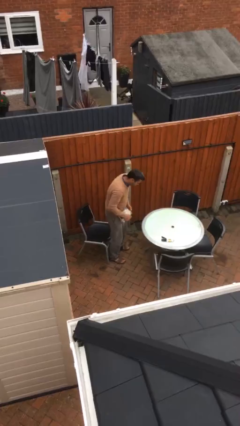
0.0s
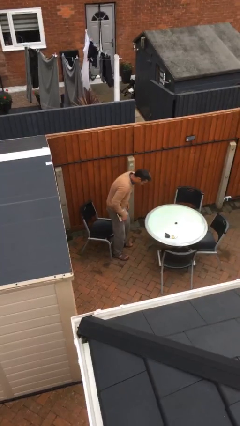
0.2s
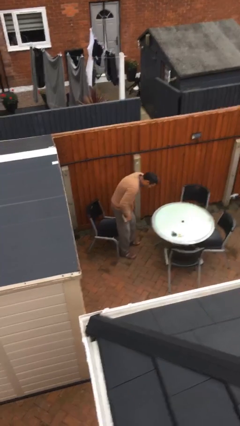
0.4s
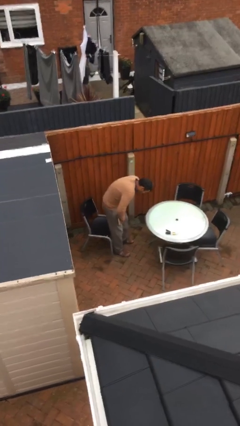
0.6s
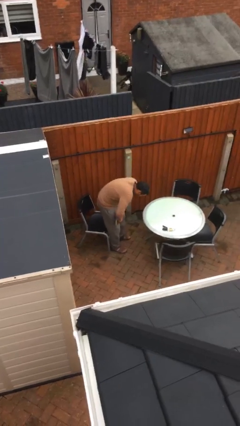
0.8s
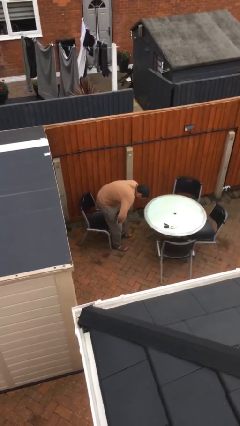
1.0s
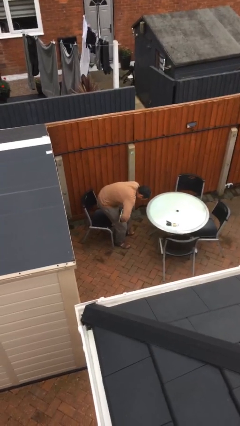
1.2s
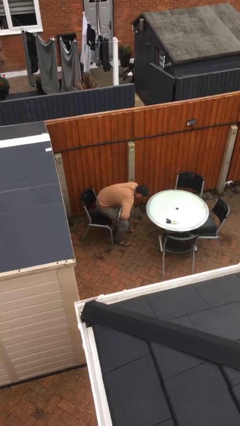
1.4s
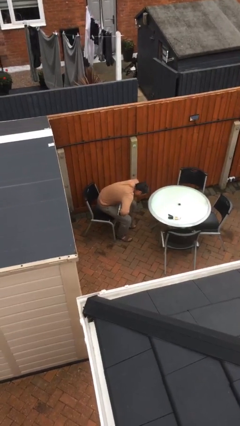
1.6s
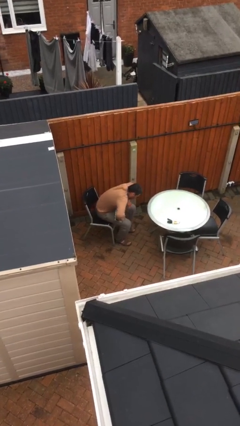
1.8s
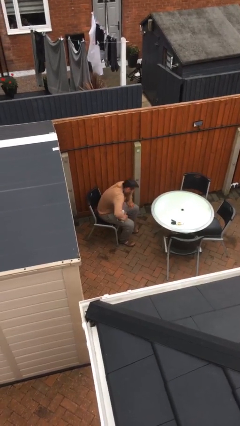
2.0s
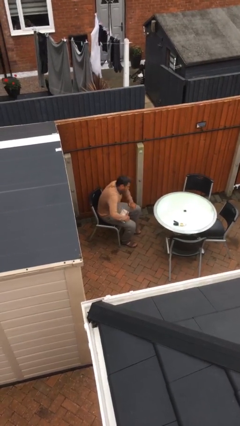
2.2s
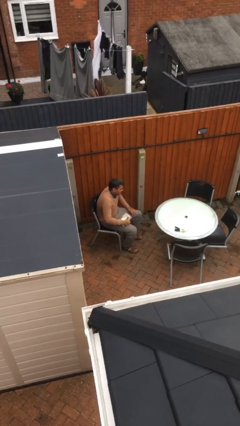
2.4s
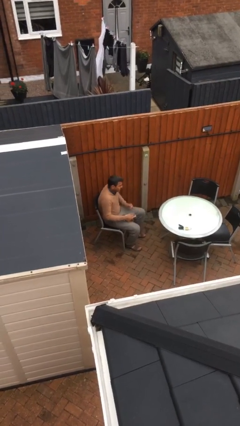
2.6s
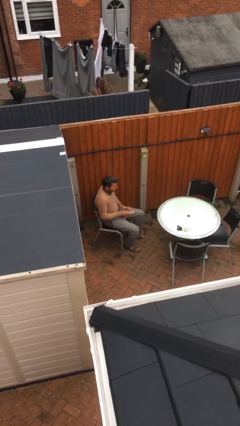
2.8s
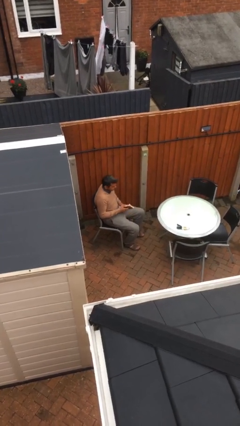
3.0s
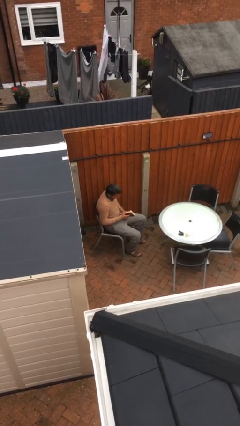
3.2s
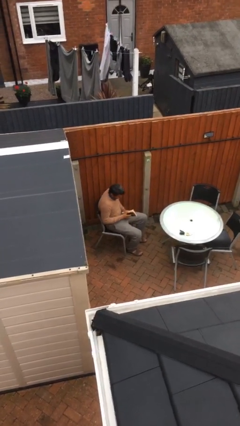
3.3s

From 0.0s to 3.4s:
person sits down

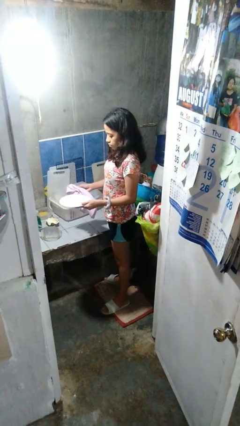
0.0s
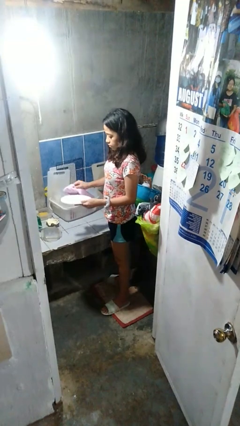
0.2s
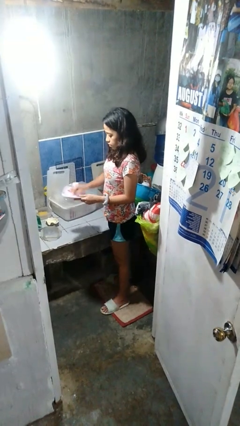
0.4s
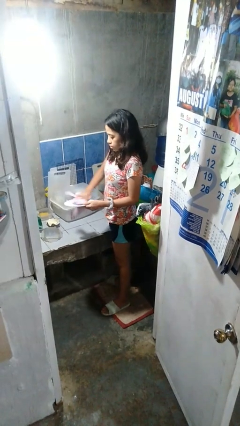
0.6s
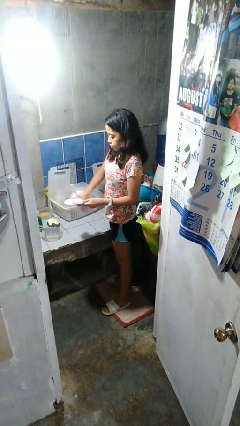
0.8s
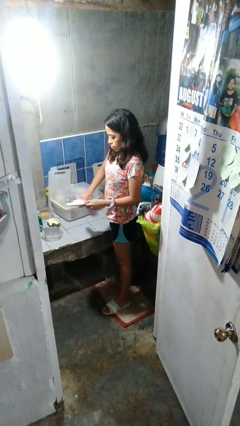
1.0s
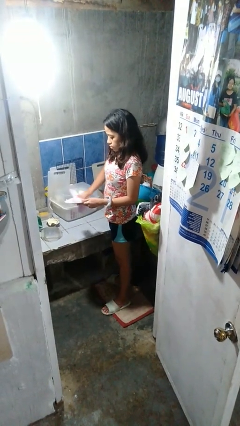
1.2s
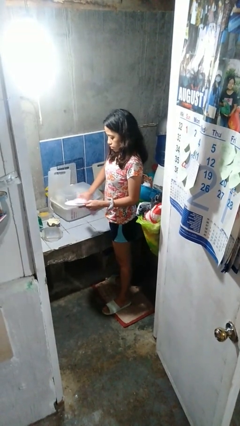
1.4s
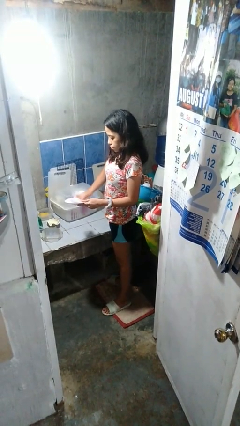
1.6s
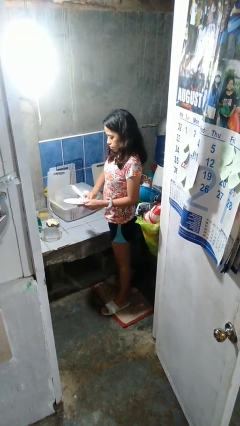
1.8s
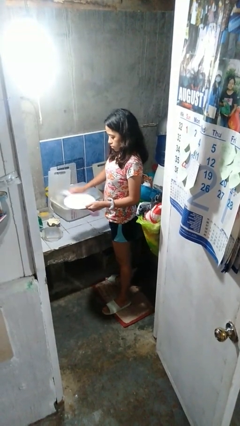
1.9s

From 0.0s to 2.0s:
person dries dish

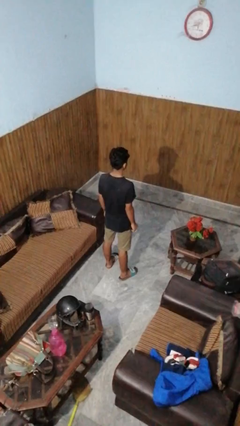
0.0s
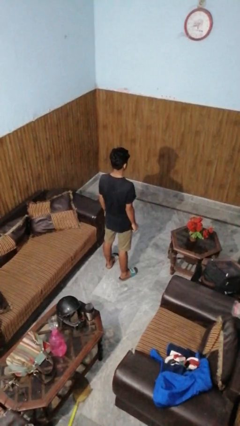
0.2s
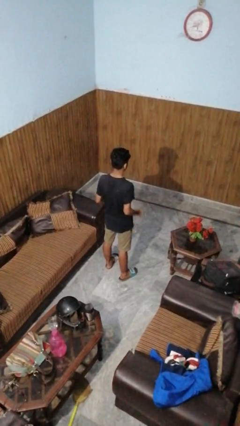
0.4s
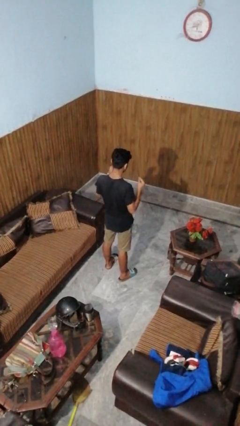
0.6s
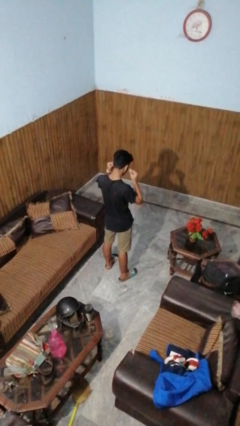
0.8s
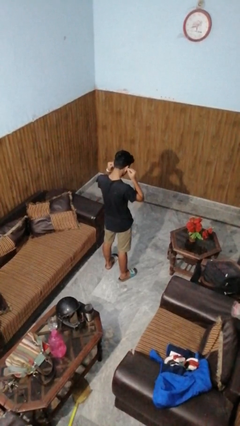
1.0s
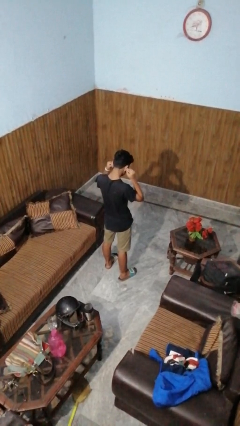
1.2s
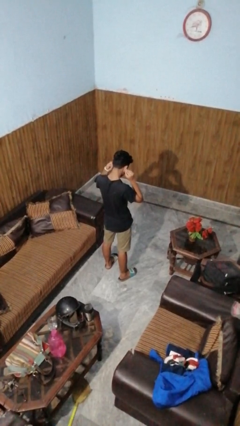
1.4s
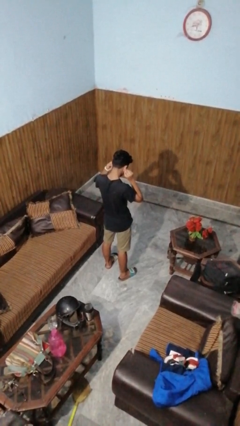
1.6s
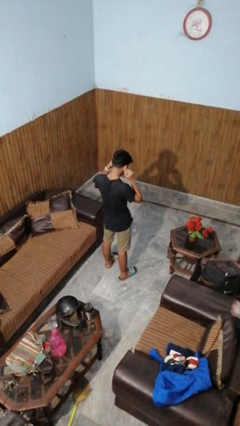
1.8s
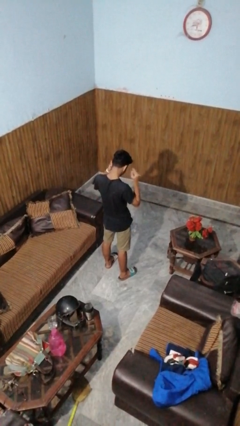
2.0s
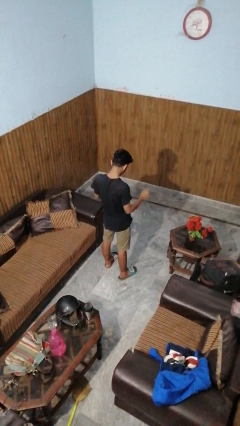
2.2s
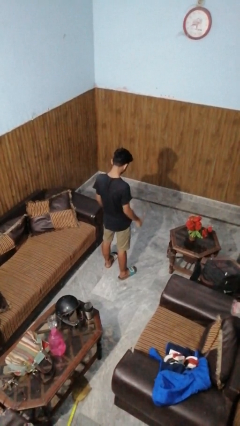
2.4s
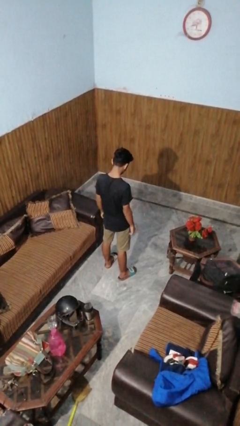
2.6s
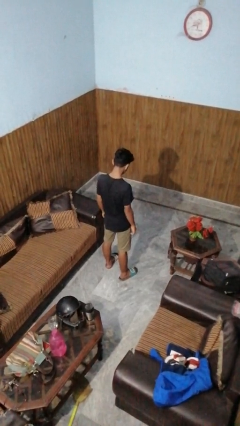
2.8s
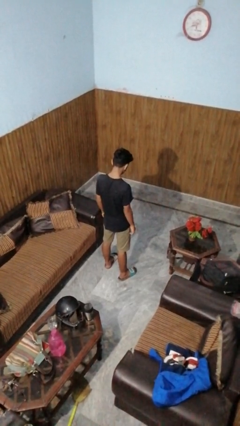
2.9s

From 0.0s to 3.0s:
person puts on headphones

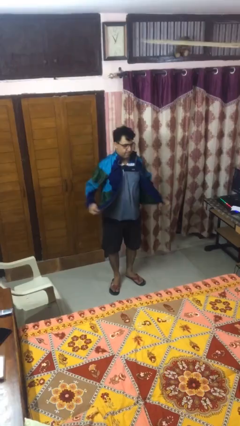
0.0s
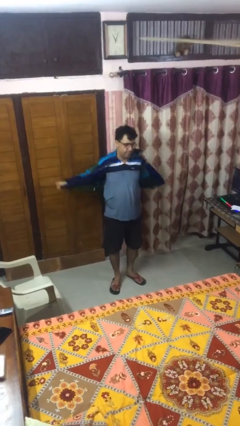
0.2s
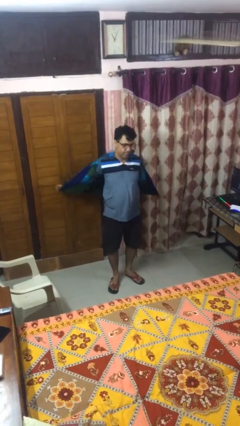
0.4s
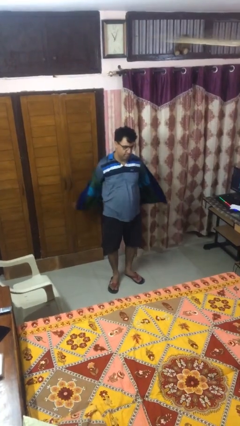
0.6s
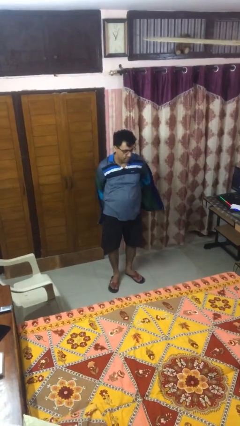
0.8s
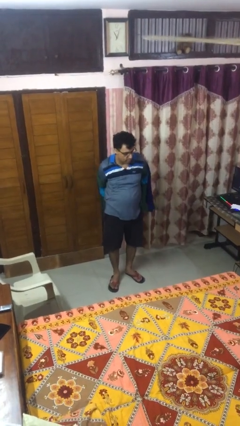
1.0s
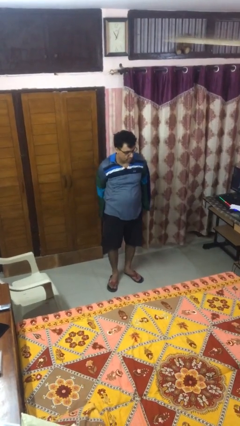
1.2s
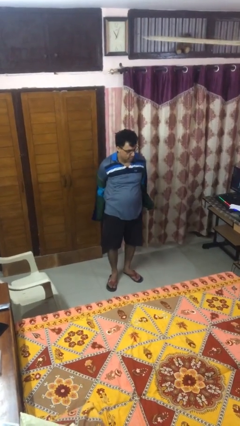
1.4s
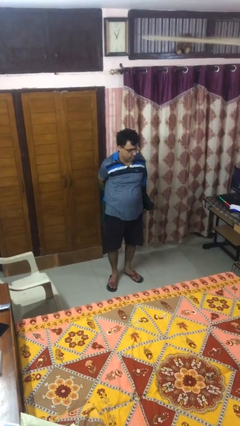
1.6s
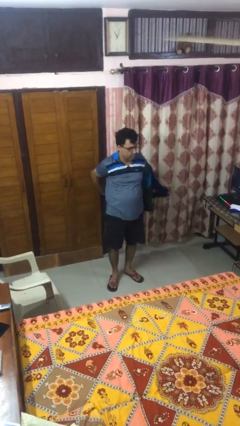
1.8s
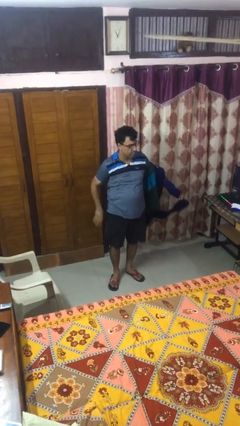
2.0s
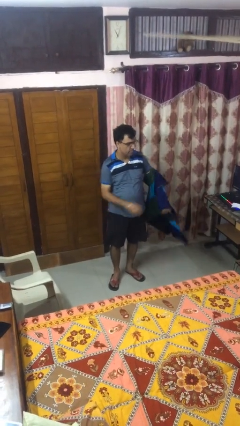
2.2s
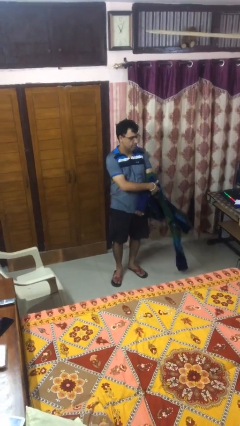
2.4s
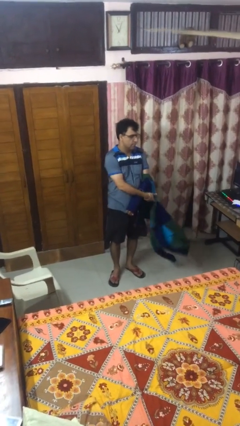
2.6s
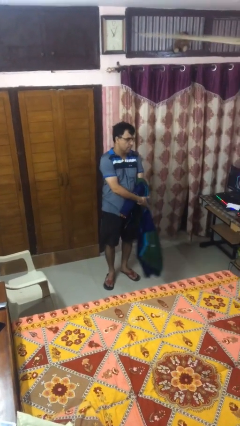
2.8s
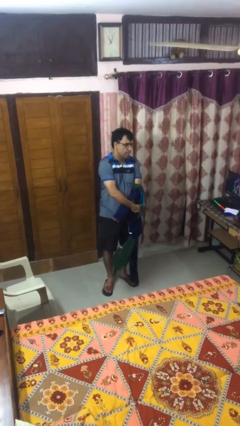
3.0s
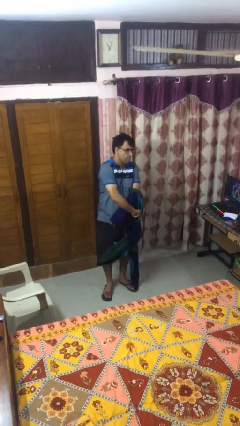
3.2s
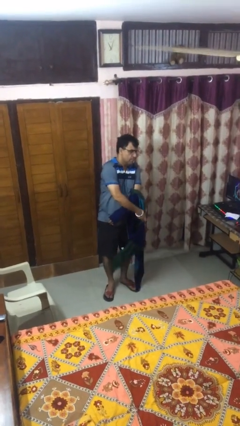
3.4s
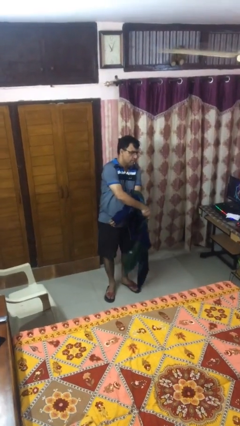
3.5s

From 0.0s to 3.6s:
person takes off jacket

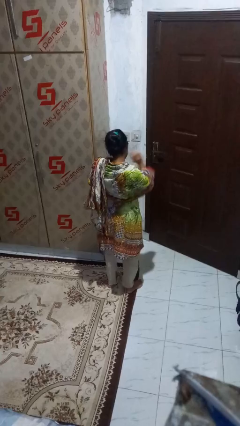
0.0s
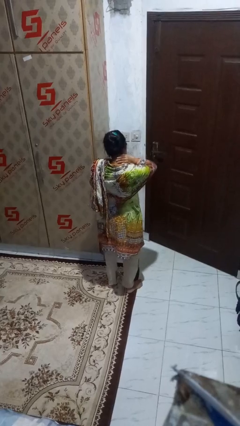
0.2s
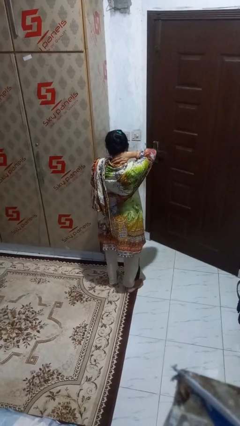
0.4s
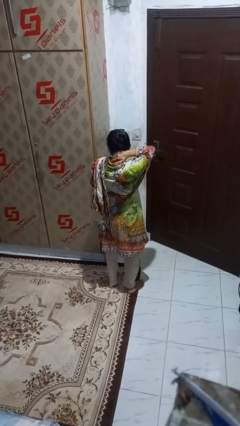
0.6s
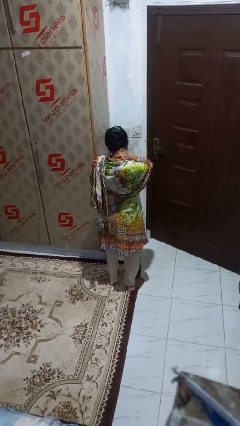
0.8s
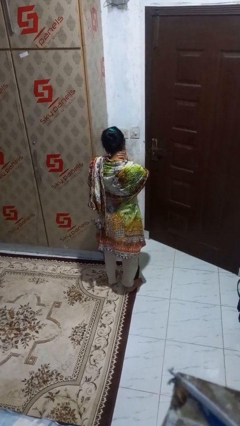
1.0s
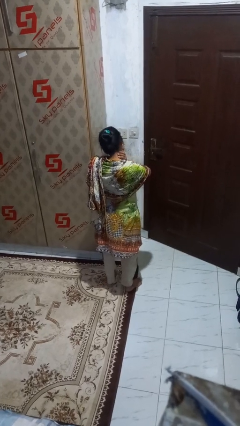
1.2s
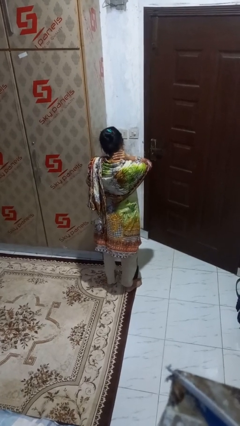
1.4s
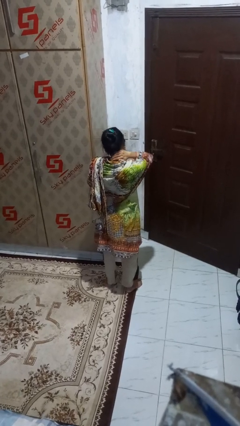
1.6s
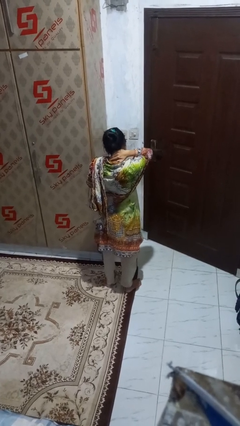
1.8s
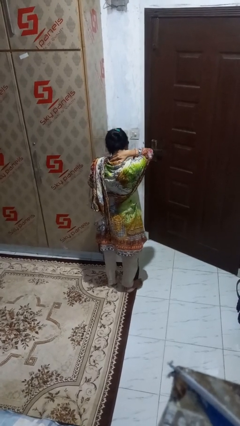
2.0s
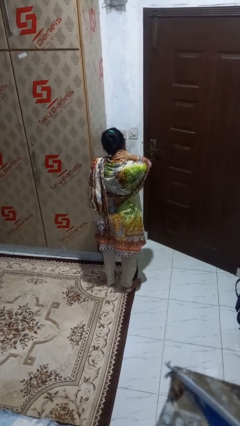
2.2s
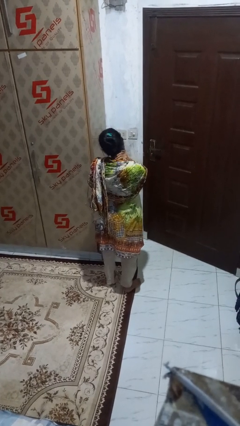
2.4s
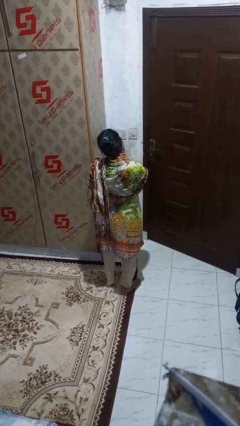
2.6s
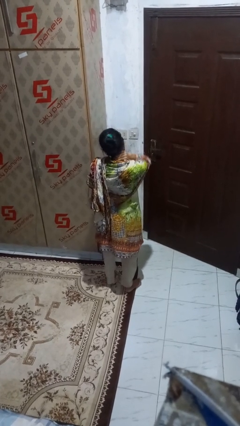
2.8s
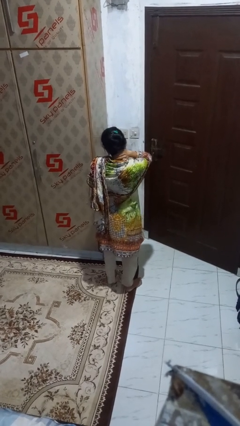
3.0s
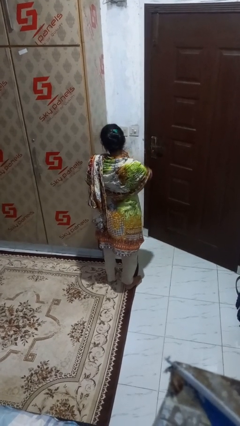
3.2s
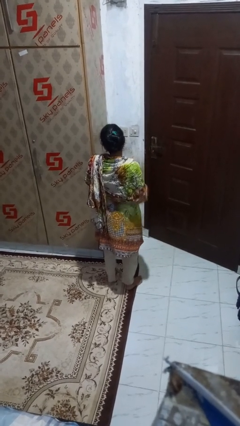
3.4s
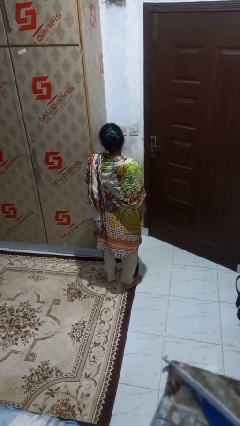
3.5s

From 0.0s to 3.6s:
person rubs neck

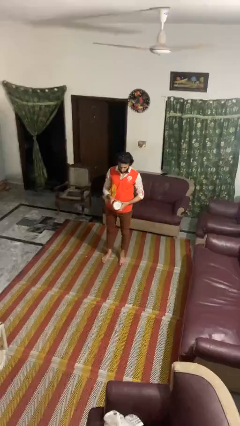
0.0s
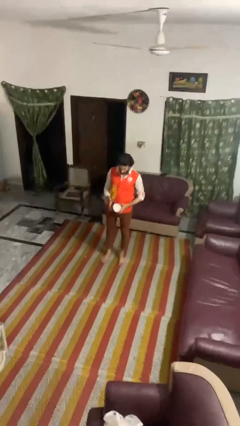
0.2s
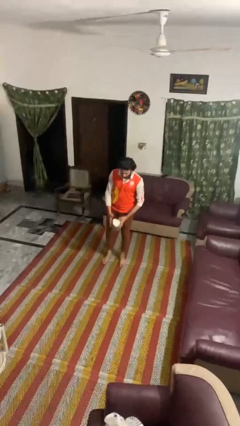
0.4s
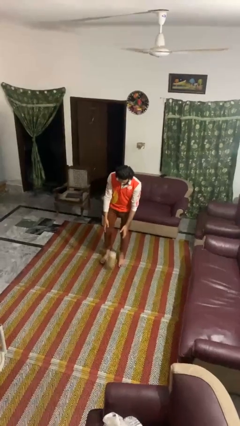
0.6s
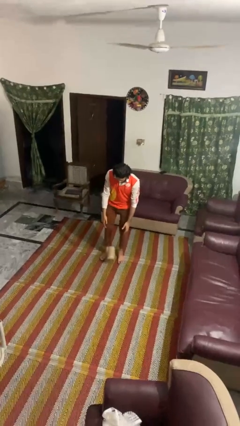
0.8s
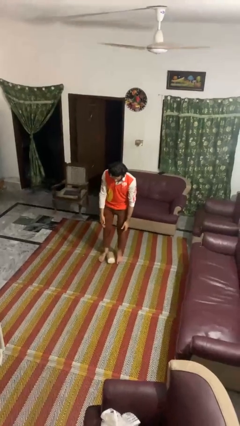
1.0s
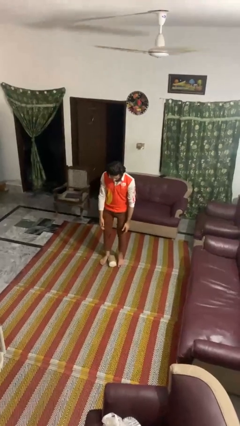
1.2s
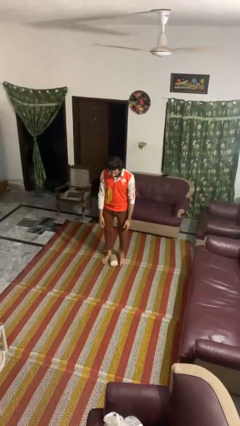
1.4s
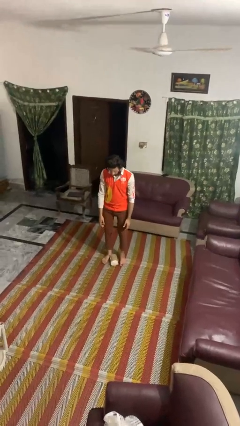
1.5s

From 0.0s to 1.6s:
person drops object

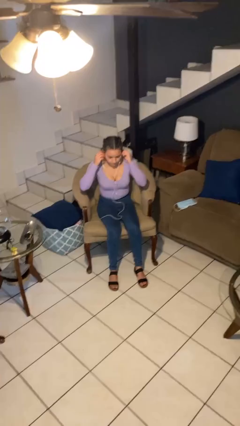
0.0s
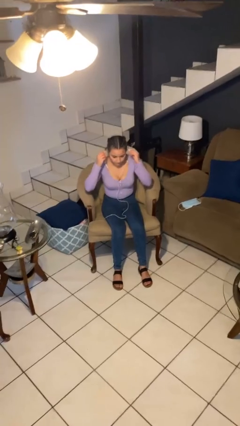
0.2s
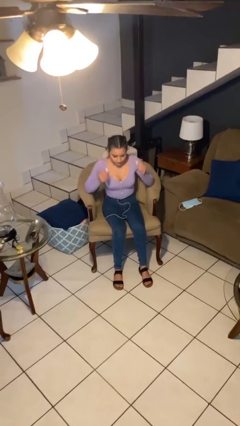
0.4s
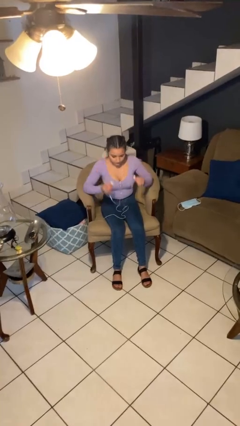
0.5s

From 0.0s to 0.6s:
person takes off headphones
